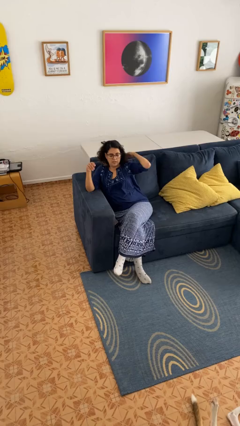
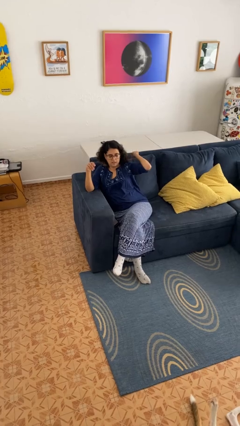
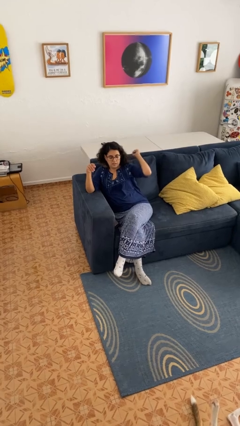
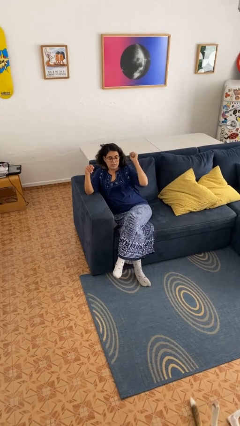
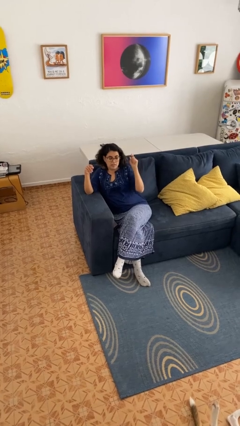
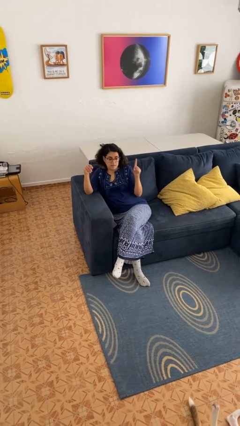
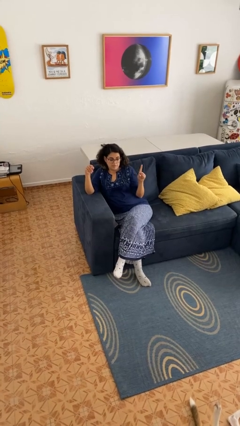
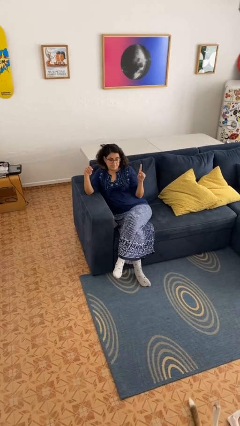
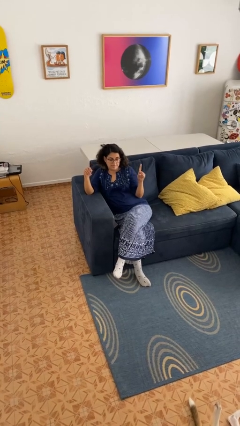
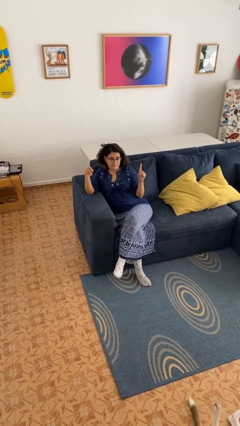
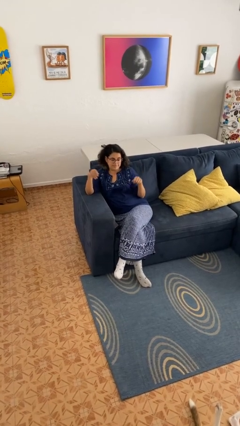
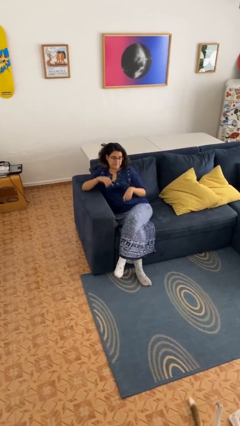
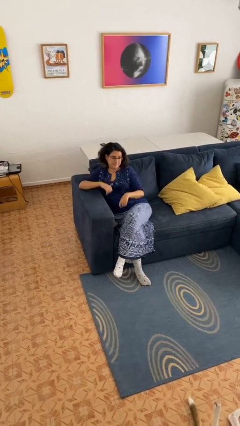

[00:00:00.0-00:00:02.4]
person gestures number one

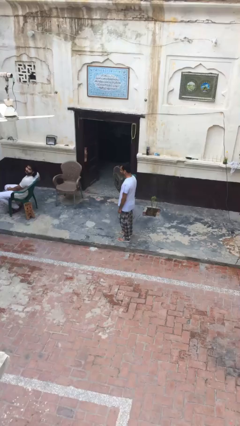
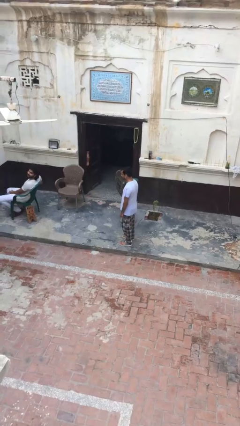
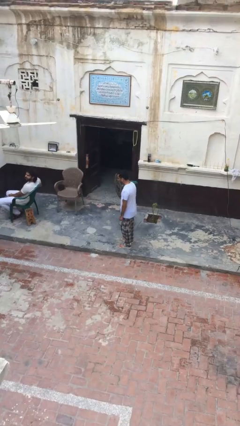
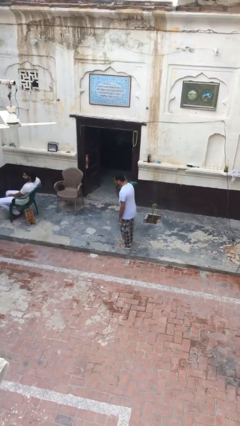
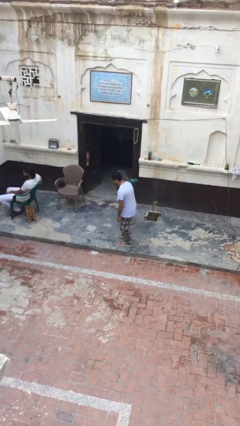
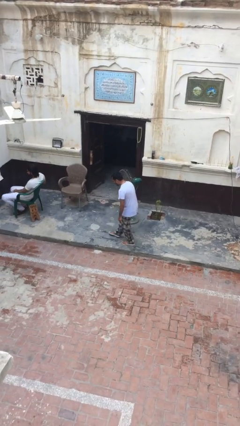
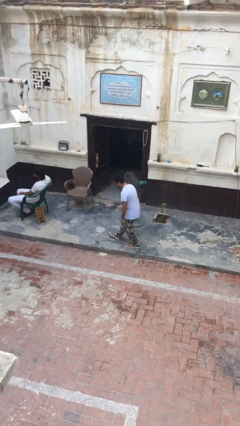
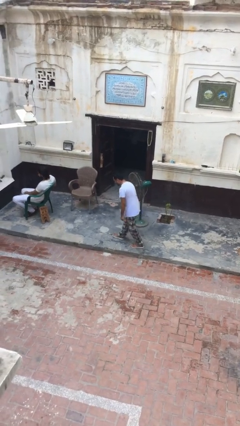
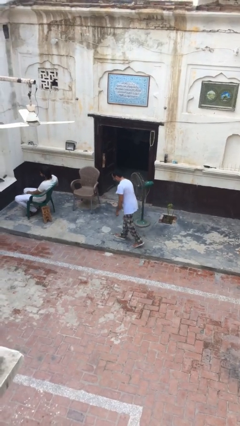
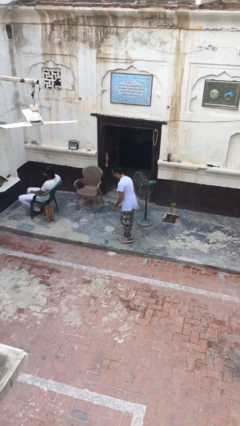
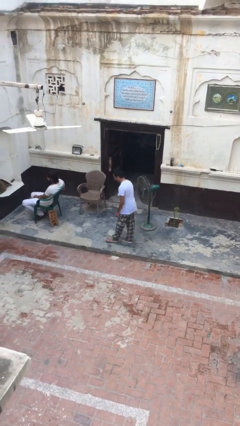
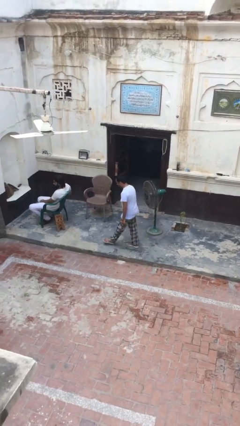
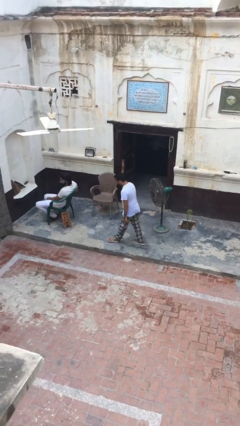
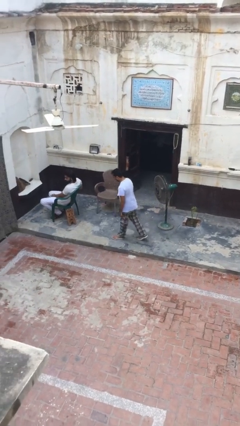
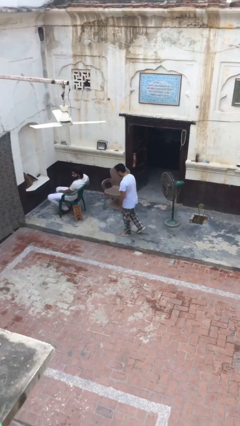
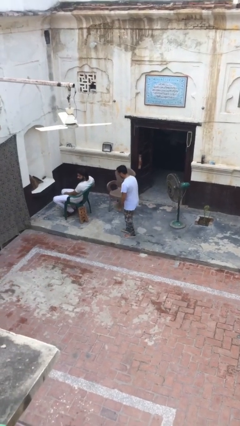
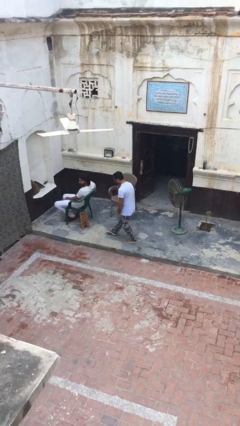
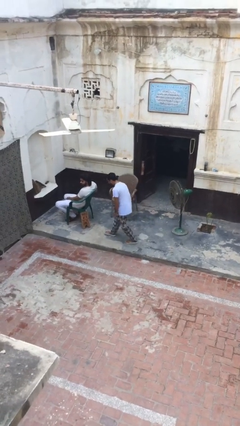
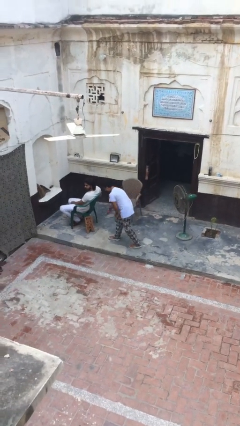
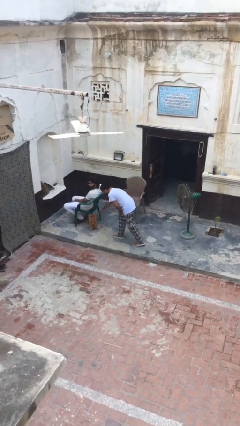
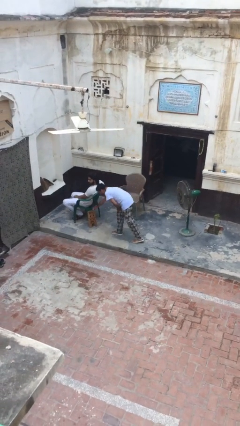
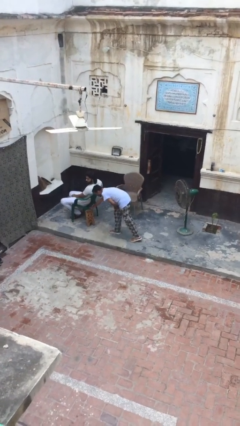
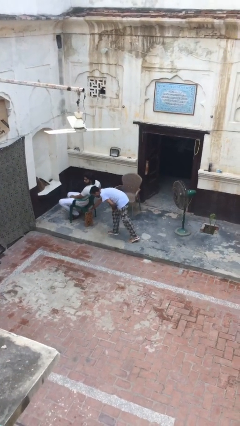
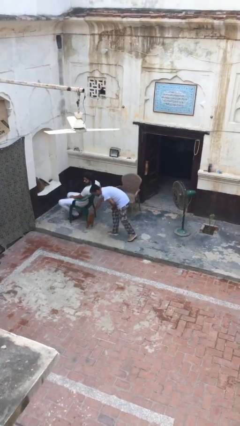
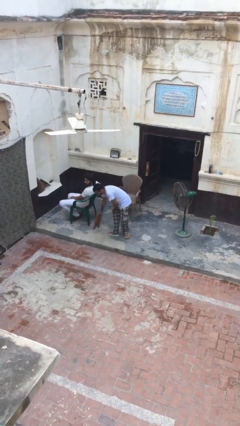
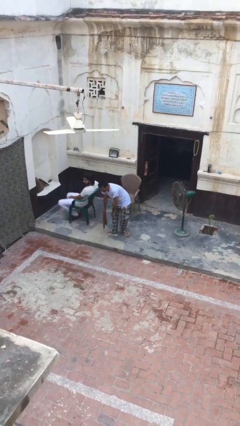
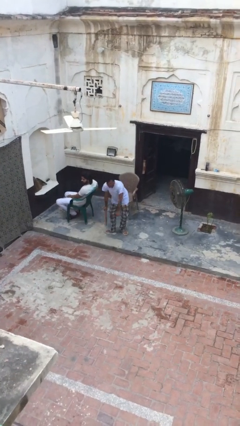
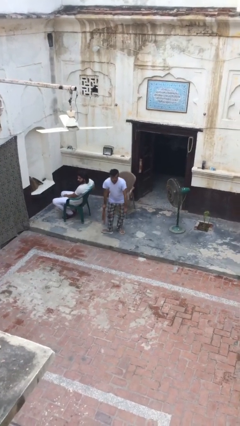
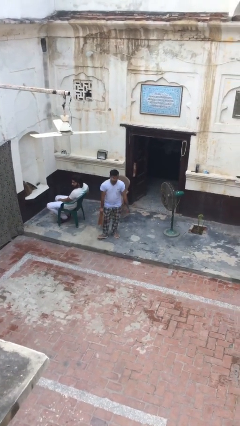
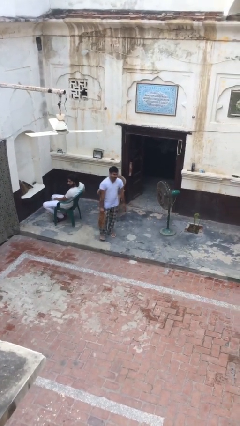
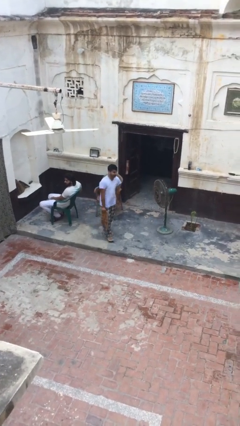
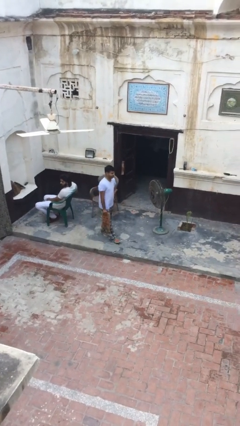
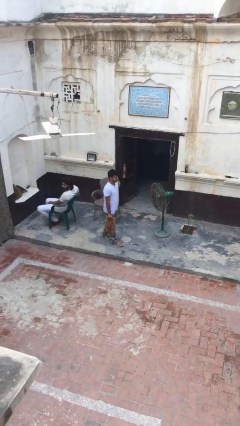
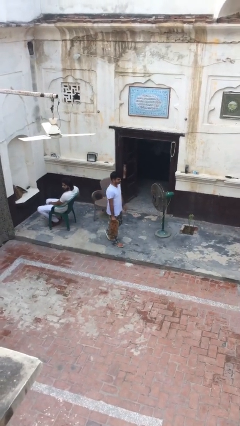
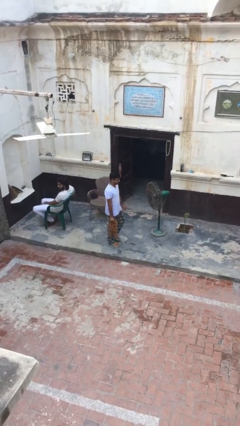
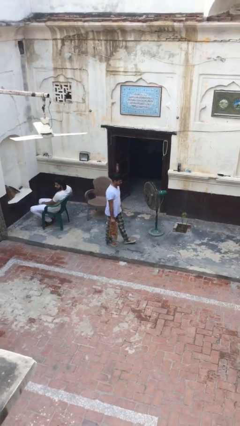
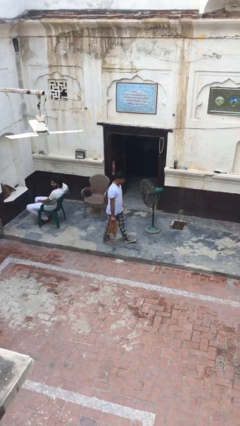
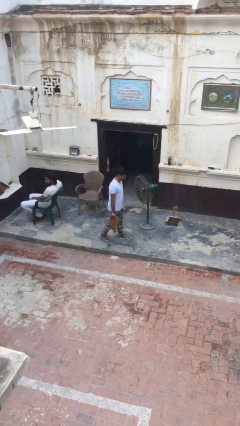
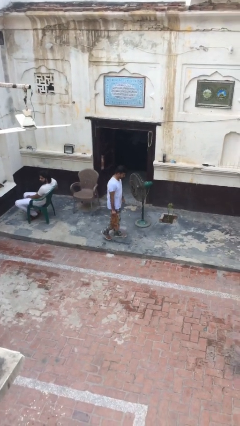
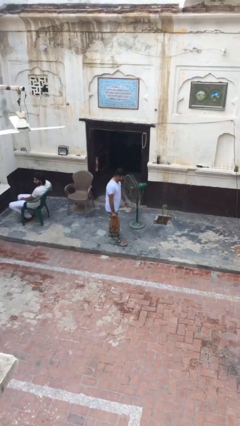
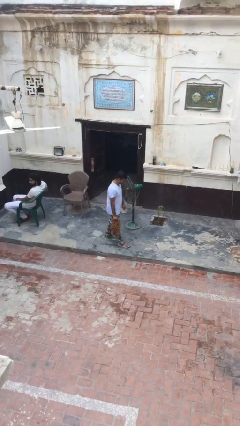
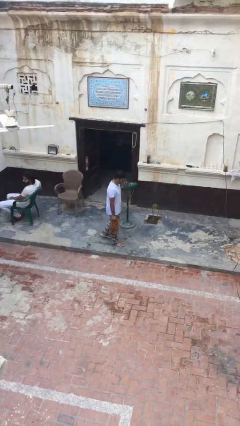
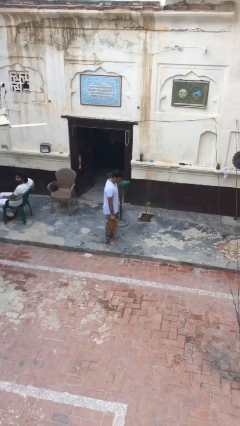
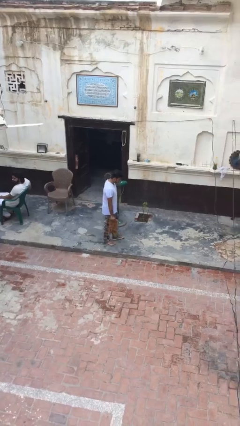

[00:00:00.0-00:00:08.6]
person steals object from person

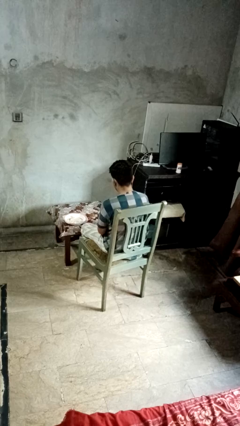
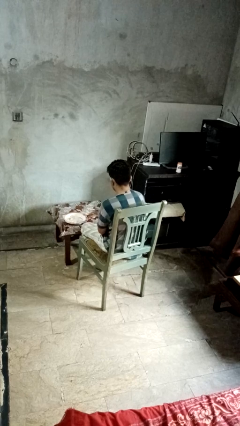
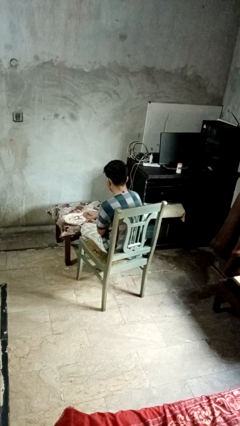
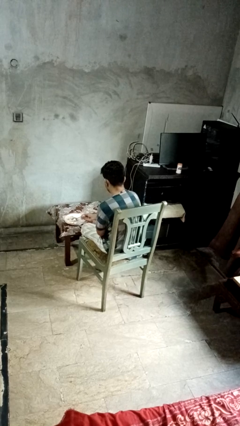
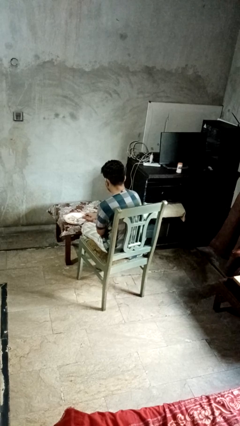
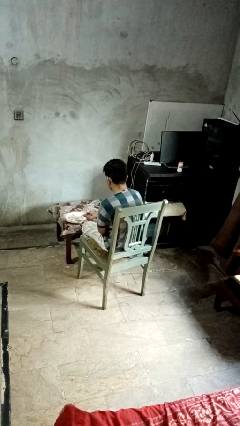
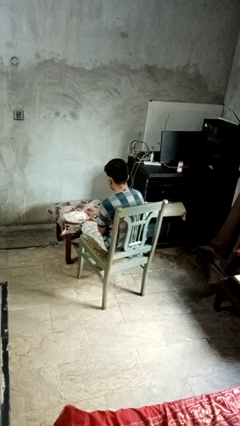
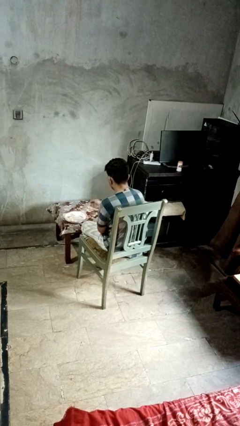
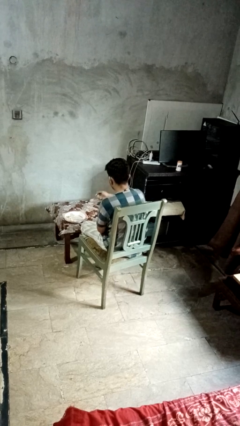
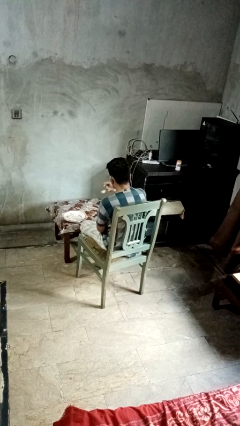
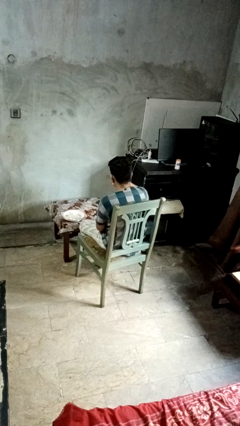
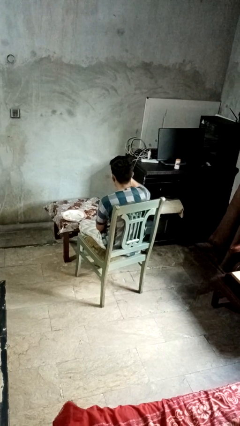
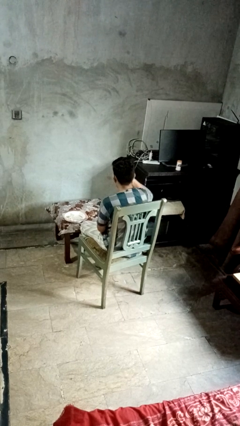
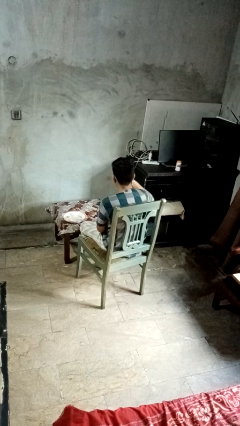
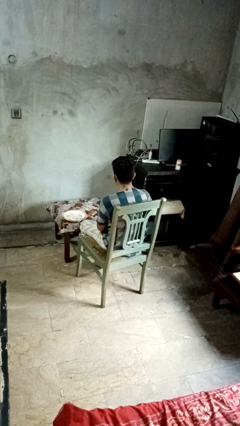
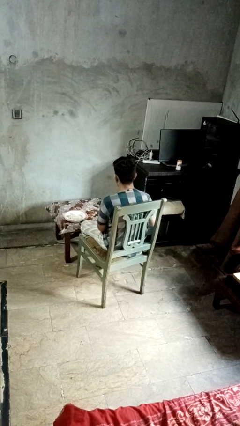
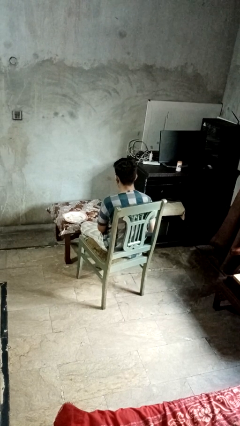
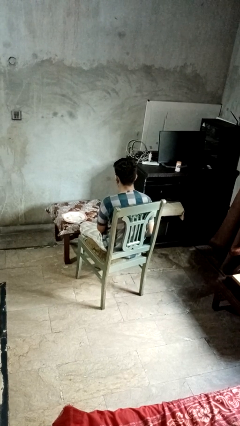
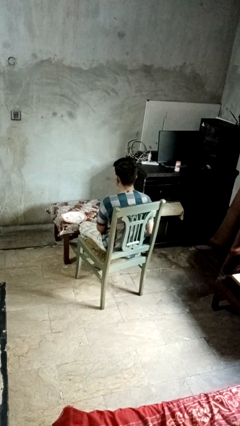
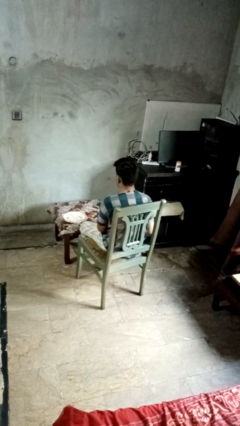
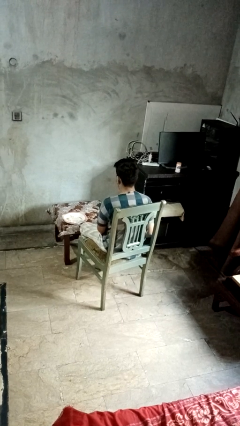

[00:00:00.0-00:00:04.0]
person eats with utensil

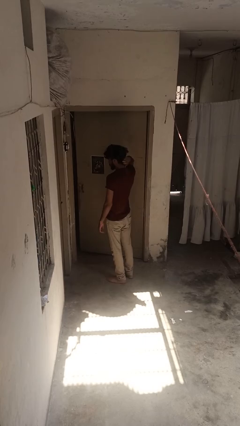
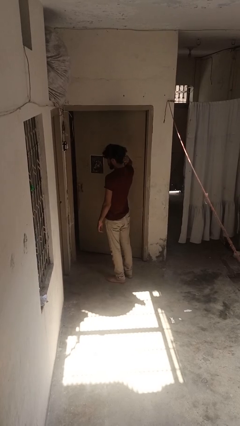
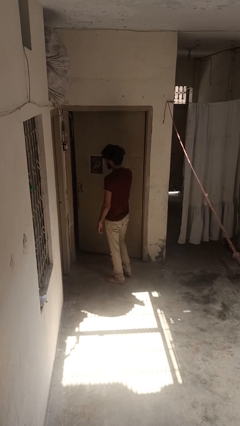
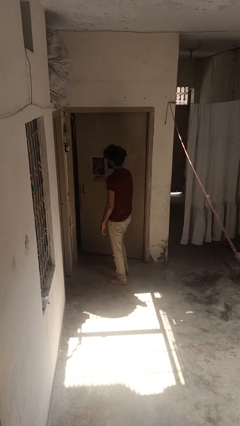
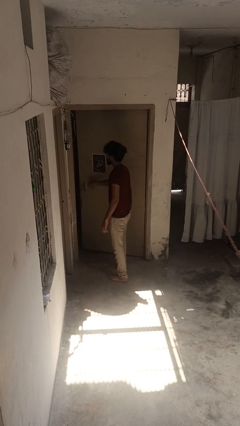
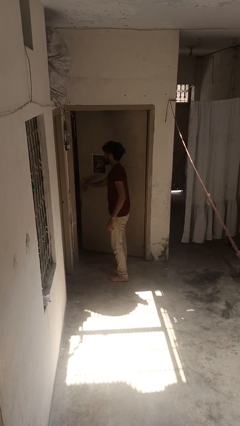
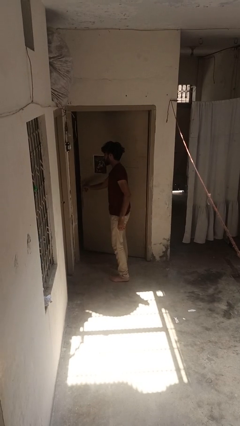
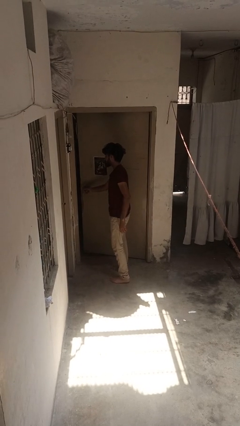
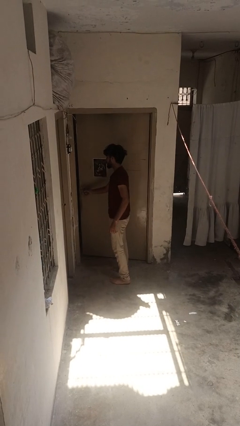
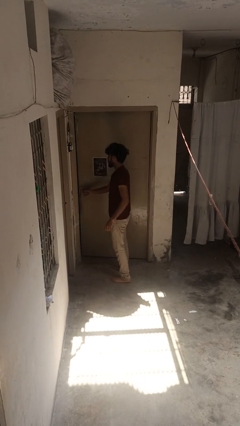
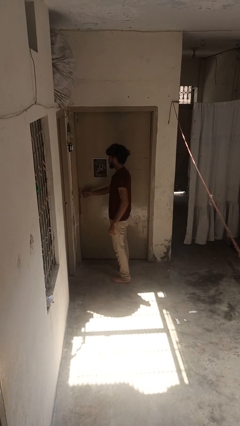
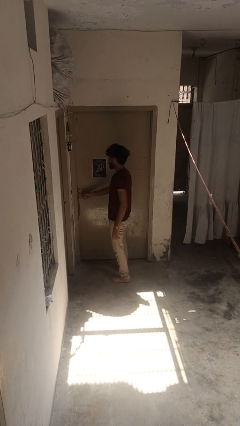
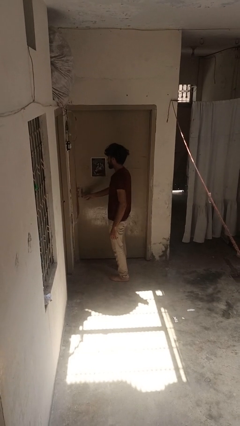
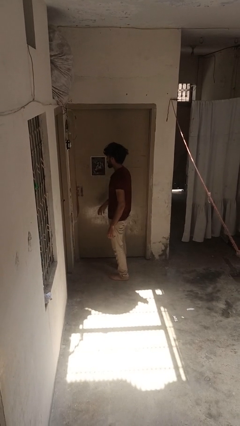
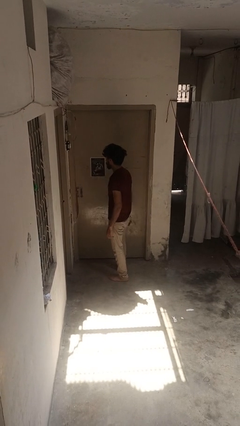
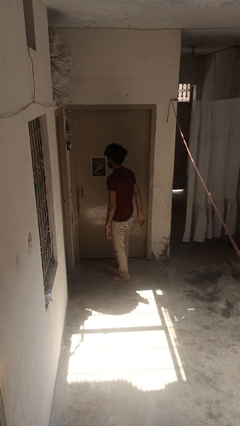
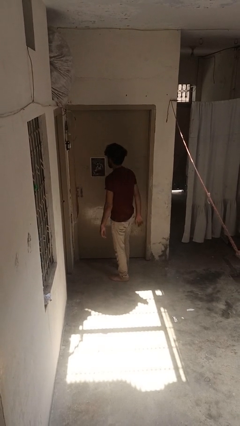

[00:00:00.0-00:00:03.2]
person closes door with foot
